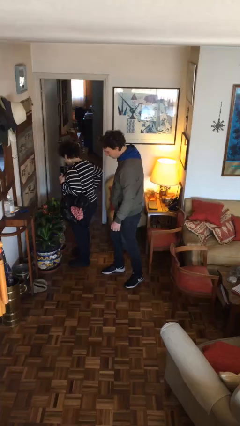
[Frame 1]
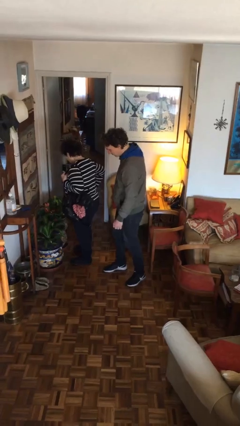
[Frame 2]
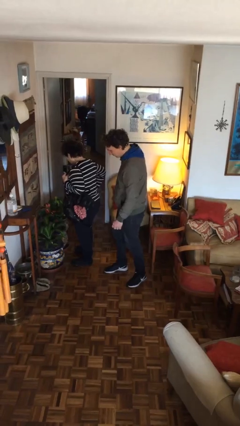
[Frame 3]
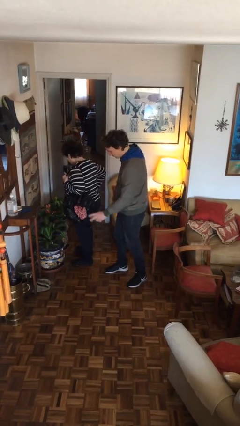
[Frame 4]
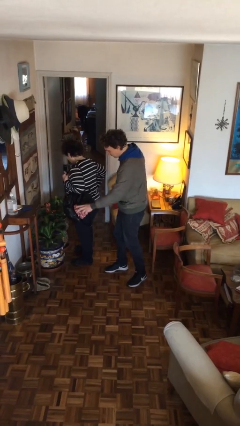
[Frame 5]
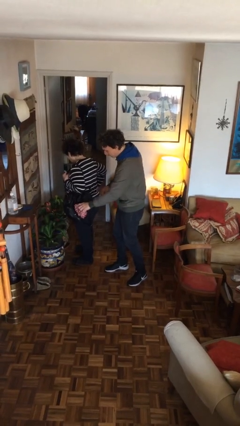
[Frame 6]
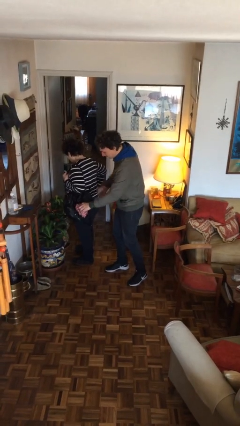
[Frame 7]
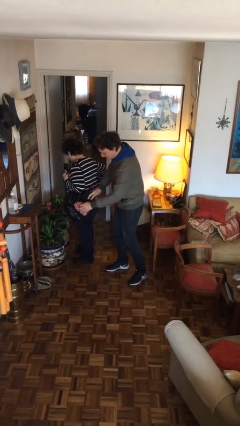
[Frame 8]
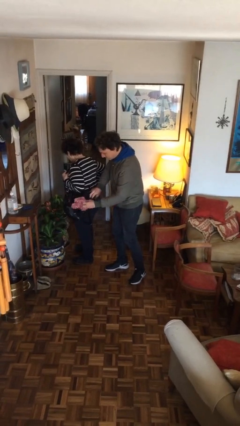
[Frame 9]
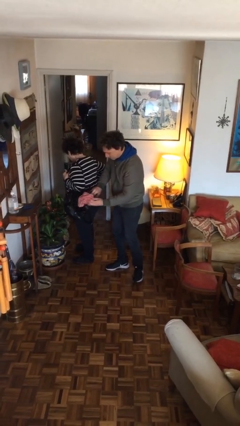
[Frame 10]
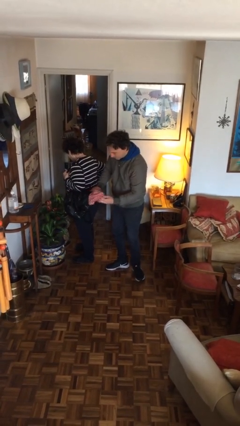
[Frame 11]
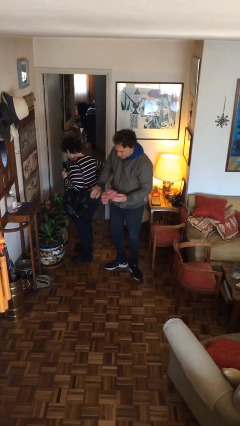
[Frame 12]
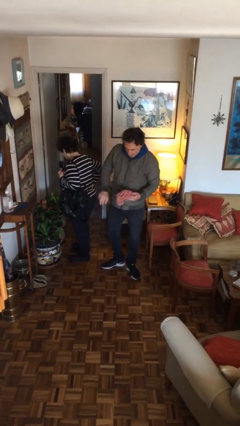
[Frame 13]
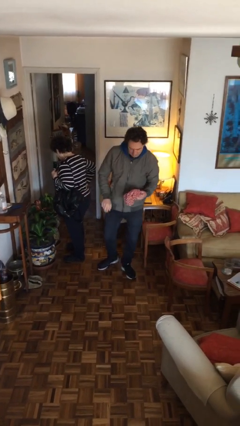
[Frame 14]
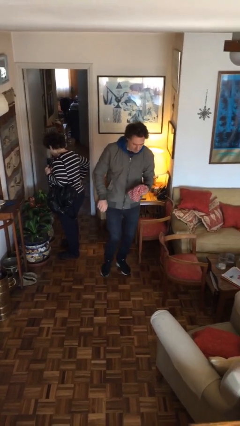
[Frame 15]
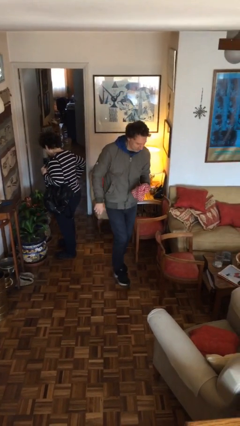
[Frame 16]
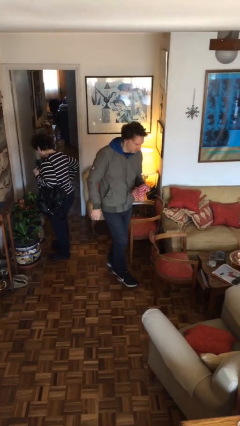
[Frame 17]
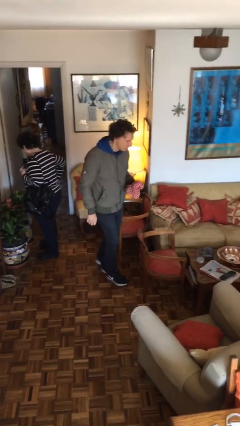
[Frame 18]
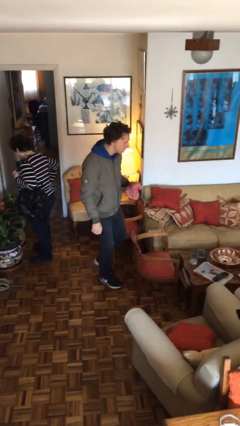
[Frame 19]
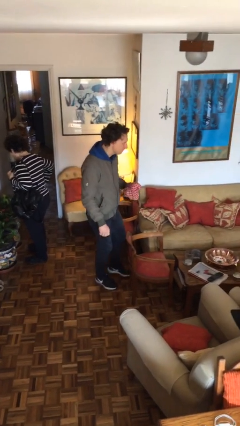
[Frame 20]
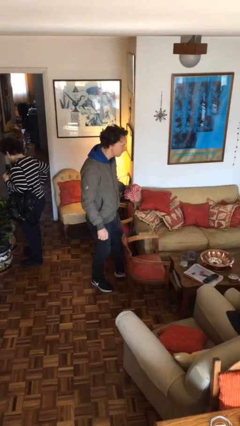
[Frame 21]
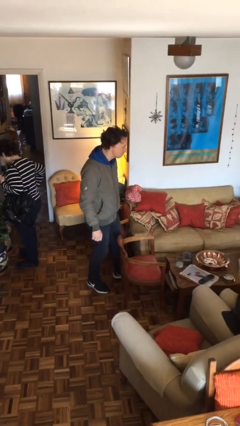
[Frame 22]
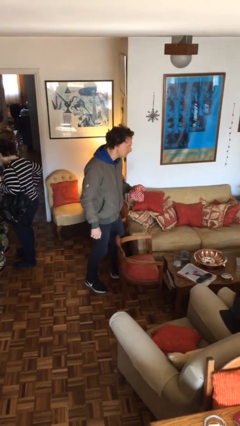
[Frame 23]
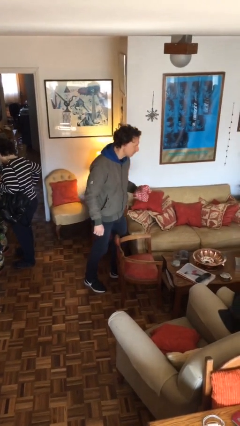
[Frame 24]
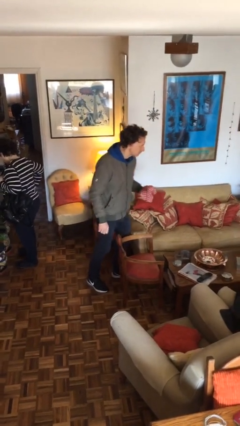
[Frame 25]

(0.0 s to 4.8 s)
person steals object from person

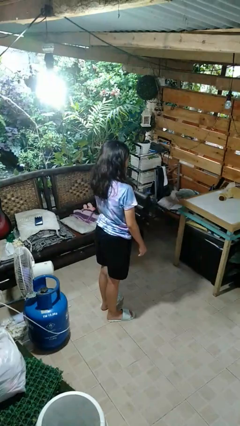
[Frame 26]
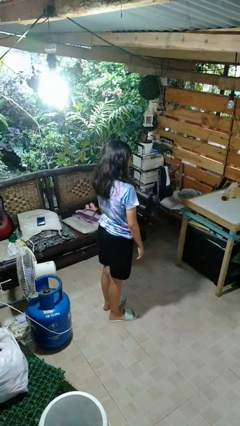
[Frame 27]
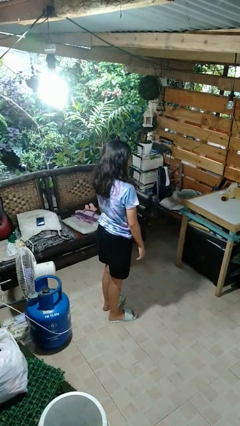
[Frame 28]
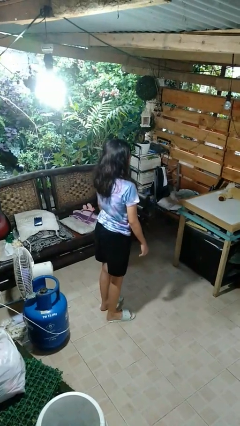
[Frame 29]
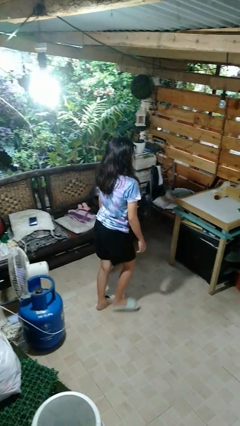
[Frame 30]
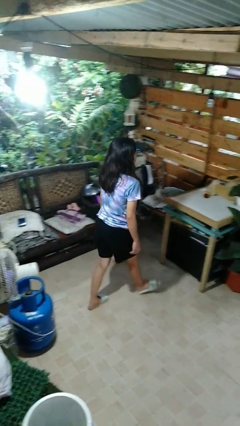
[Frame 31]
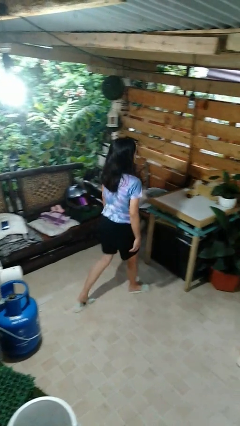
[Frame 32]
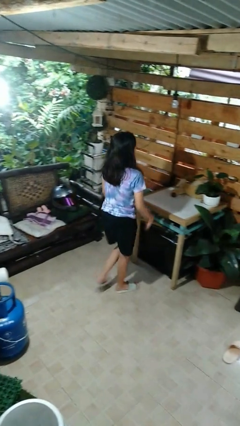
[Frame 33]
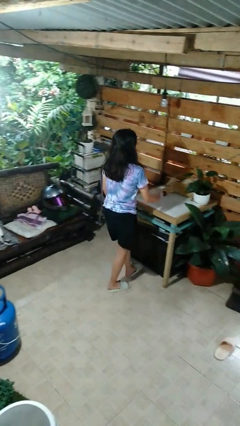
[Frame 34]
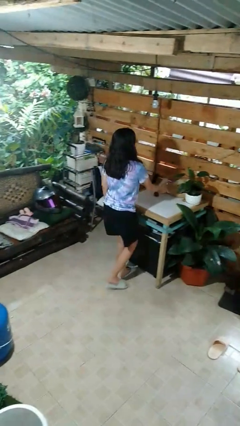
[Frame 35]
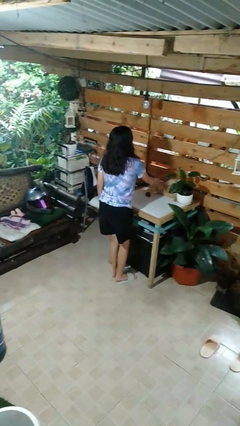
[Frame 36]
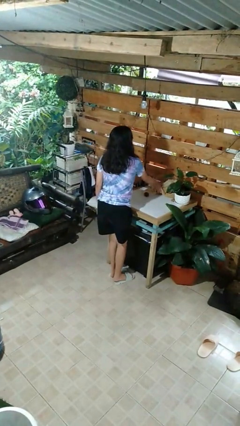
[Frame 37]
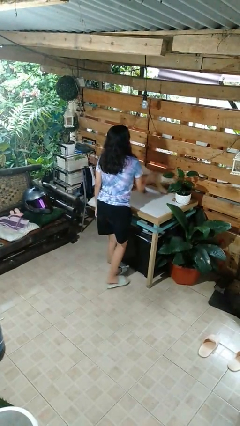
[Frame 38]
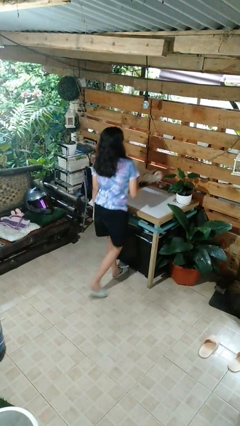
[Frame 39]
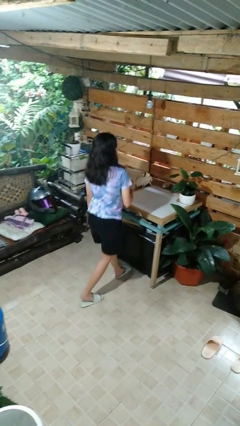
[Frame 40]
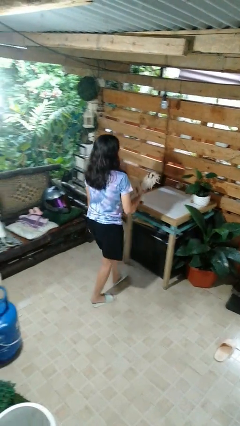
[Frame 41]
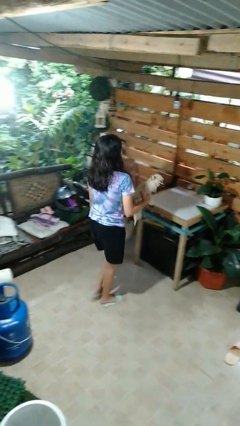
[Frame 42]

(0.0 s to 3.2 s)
person picks up object from table

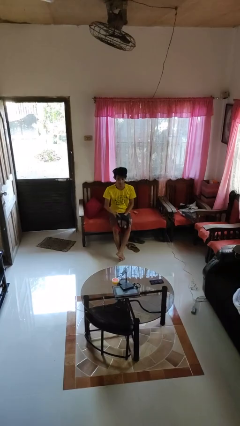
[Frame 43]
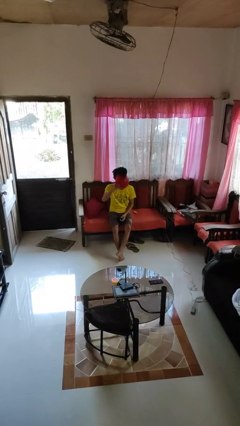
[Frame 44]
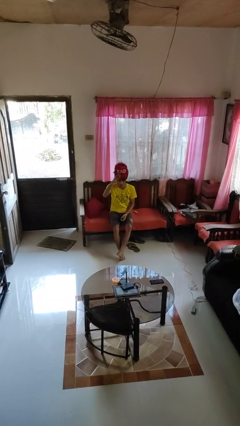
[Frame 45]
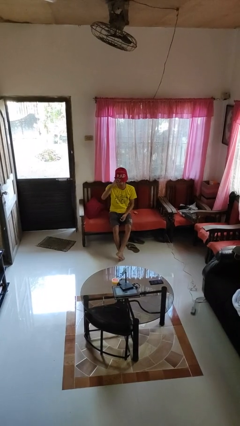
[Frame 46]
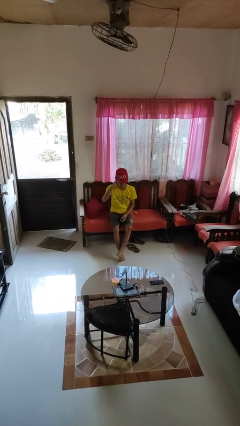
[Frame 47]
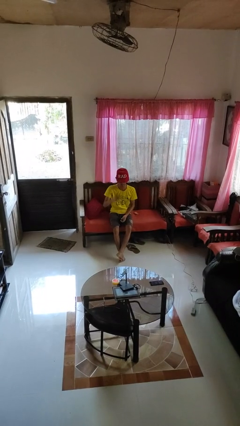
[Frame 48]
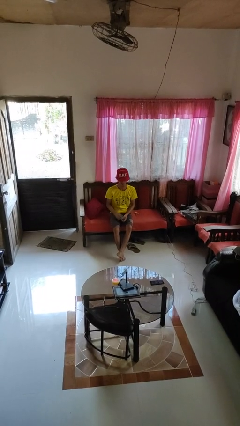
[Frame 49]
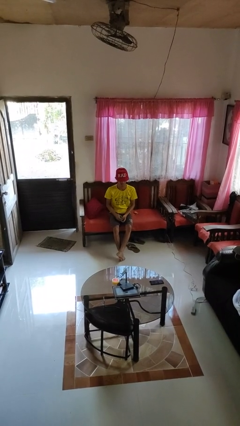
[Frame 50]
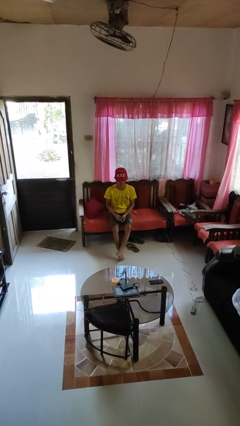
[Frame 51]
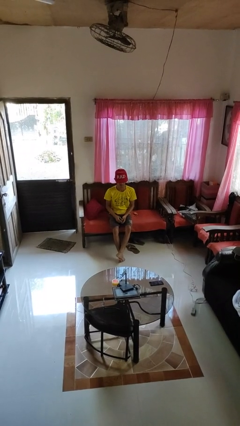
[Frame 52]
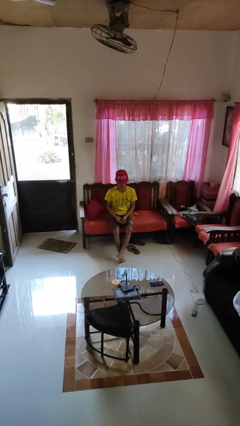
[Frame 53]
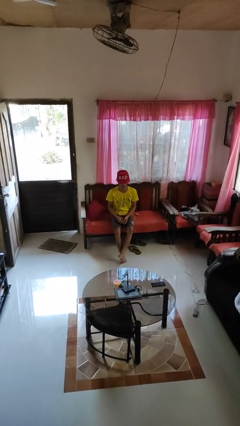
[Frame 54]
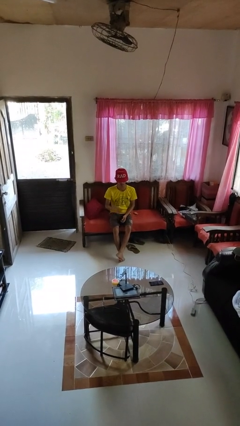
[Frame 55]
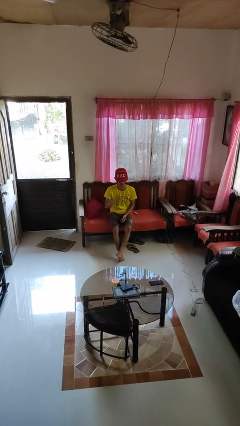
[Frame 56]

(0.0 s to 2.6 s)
person puts on hat

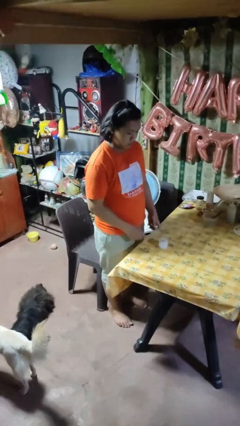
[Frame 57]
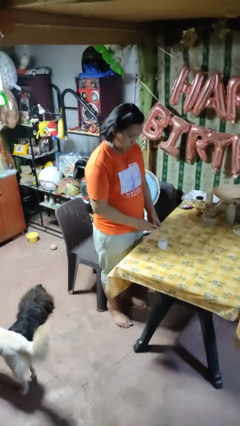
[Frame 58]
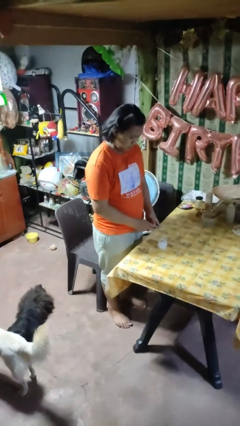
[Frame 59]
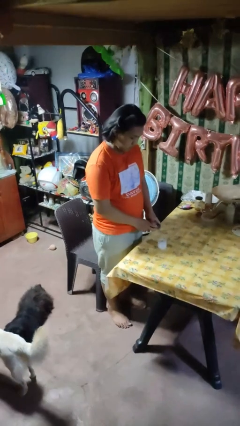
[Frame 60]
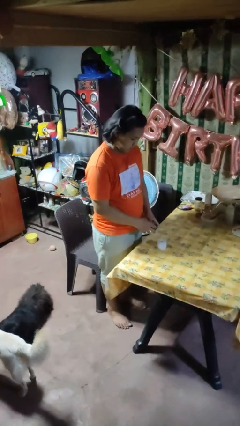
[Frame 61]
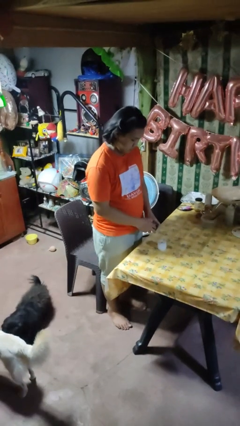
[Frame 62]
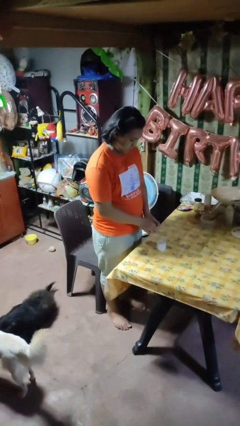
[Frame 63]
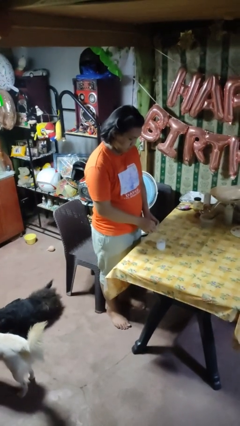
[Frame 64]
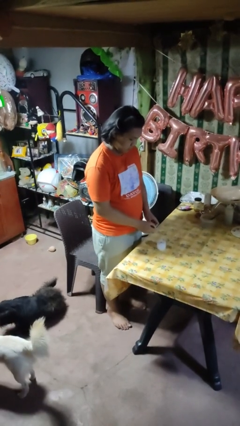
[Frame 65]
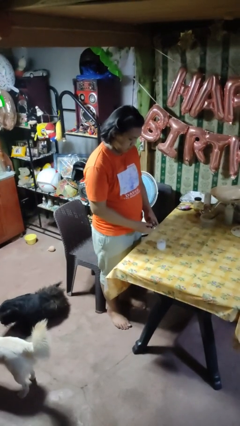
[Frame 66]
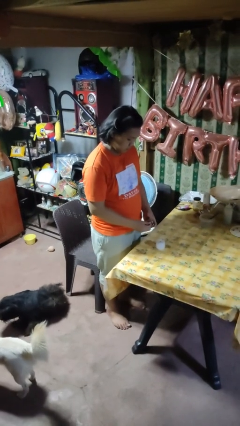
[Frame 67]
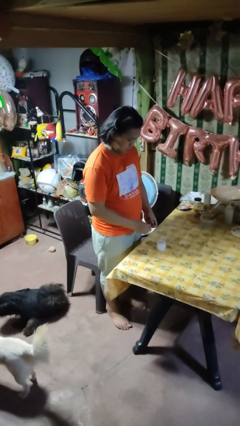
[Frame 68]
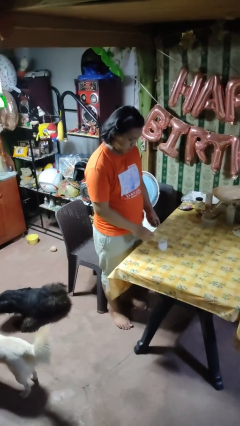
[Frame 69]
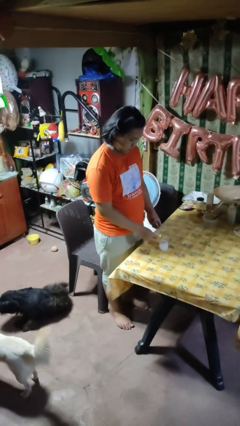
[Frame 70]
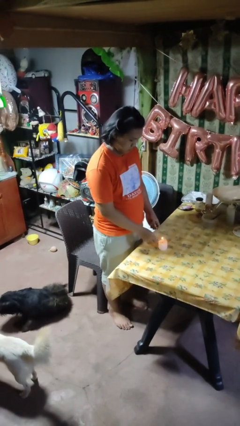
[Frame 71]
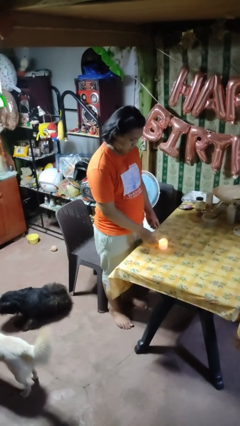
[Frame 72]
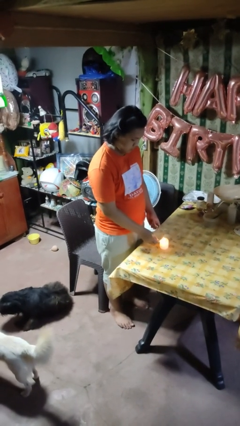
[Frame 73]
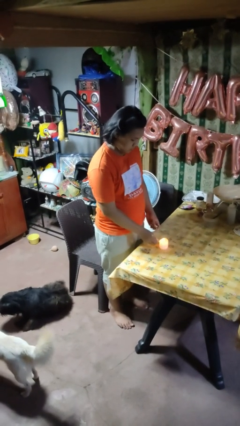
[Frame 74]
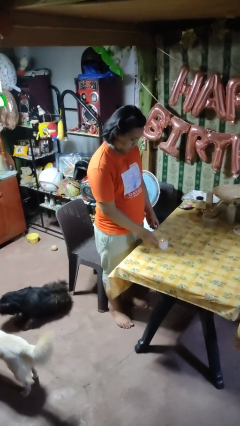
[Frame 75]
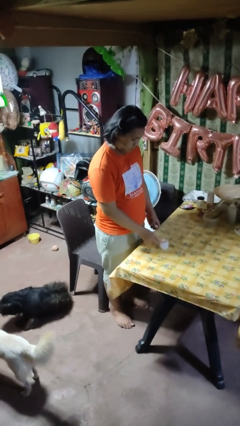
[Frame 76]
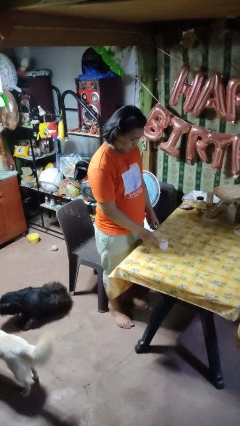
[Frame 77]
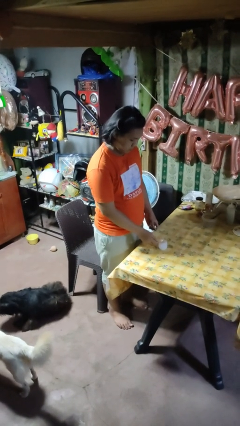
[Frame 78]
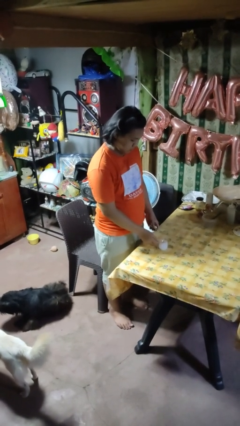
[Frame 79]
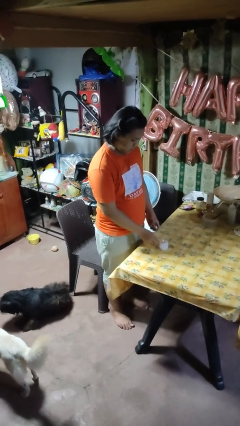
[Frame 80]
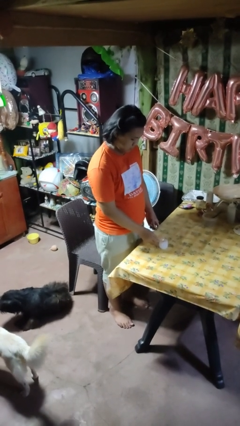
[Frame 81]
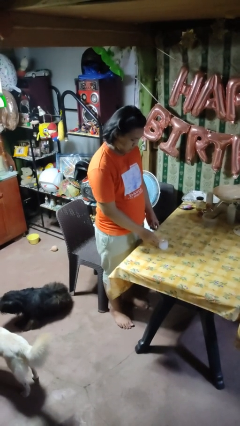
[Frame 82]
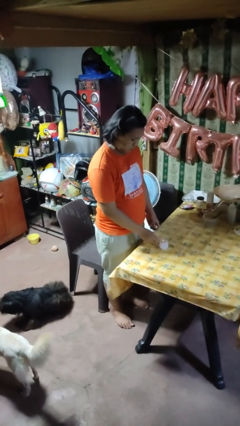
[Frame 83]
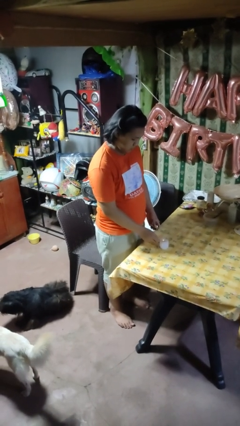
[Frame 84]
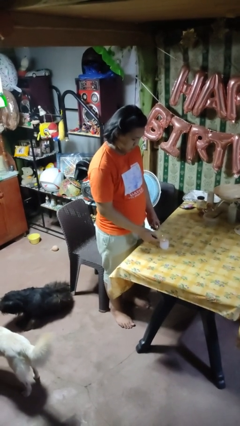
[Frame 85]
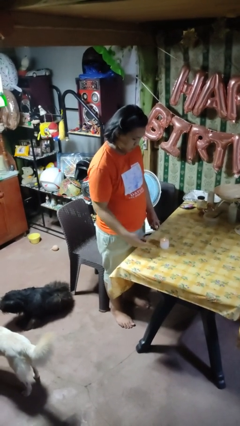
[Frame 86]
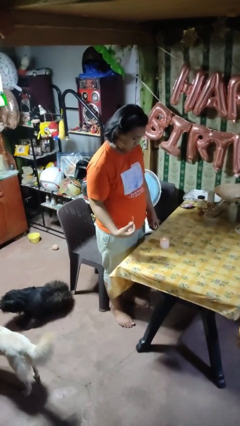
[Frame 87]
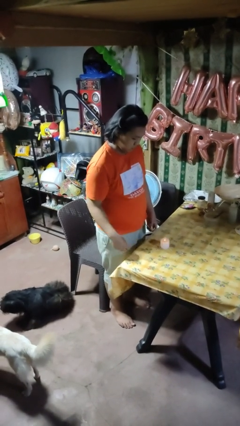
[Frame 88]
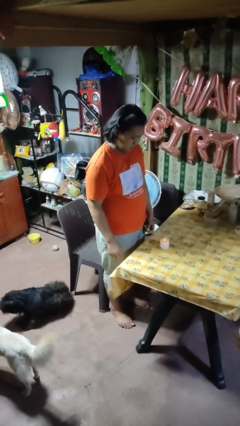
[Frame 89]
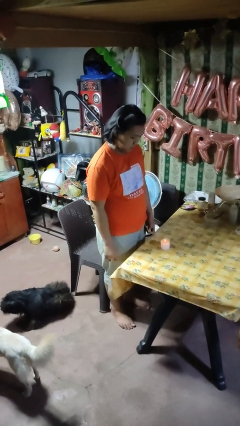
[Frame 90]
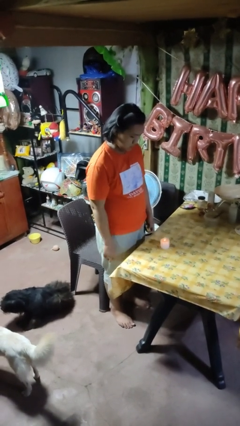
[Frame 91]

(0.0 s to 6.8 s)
person lights candle

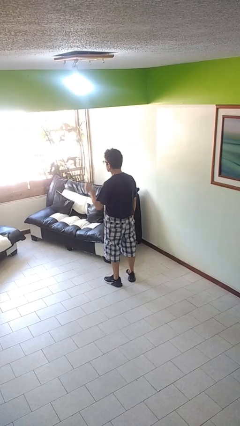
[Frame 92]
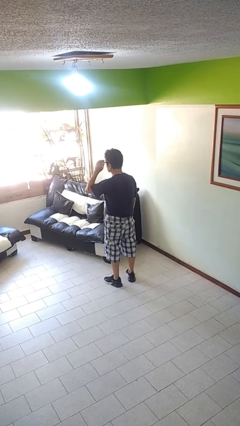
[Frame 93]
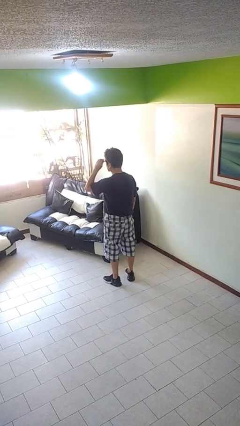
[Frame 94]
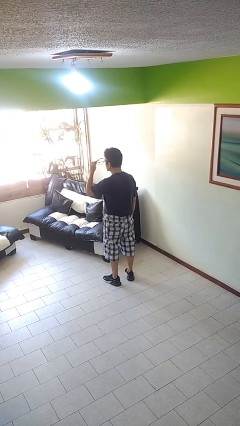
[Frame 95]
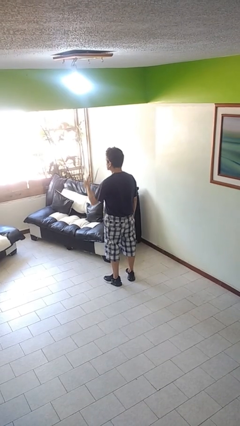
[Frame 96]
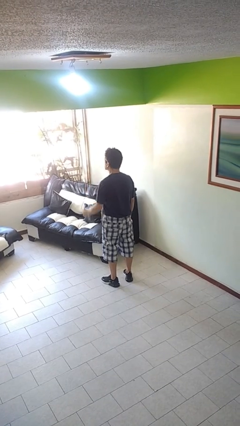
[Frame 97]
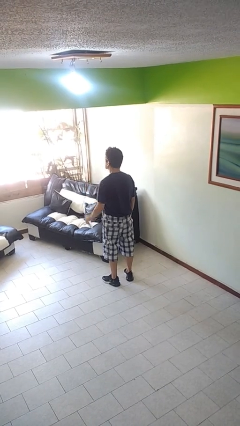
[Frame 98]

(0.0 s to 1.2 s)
person takes off glasses
